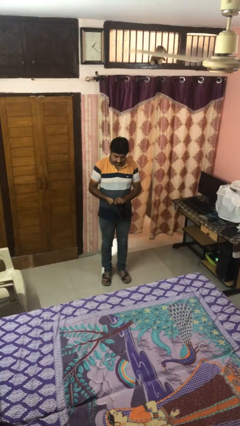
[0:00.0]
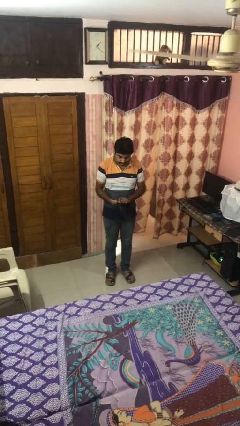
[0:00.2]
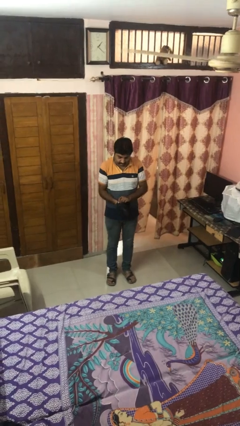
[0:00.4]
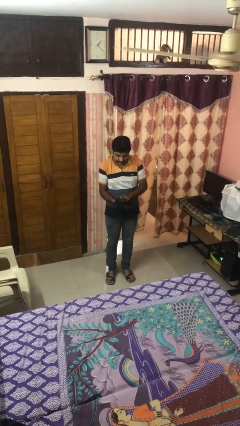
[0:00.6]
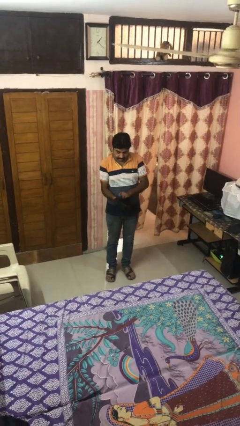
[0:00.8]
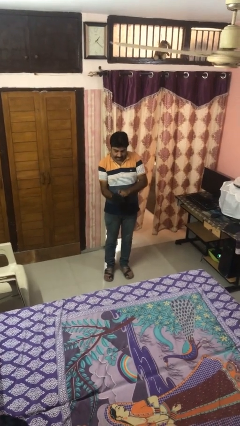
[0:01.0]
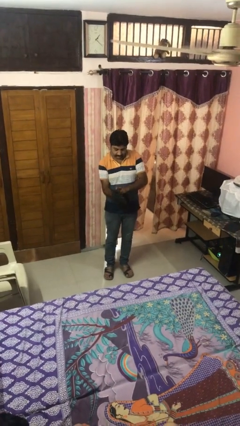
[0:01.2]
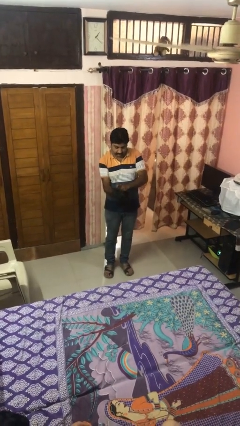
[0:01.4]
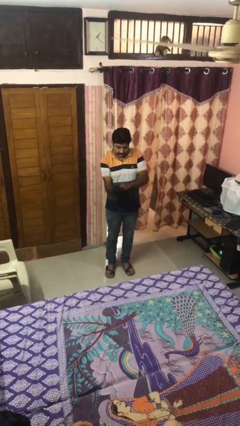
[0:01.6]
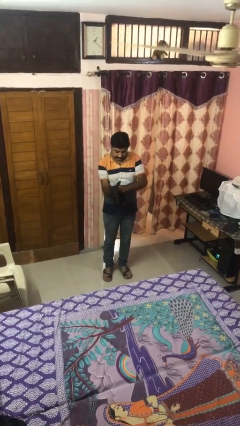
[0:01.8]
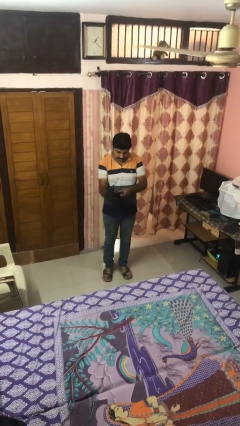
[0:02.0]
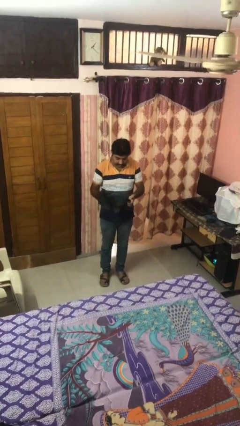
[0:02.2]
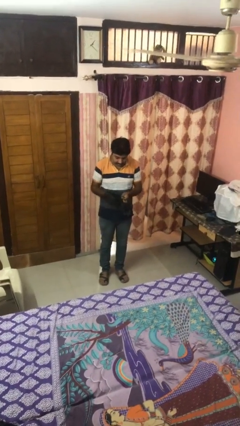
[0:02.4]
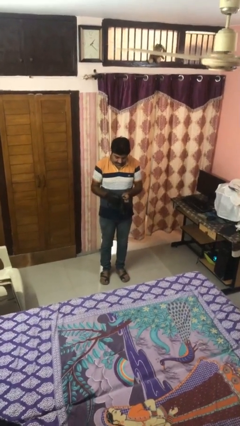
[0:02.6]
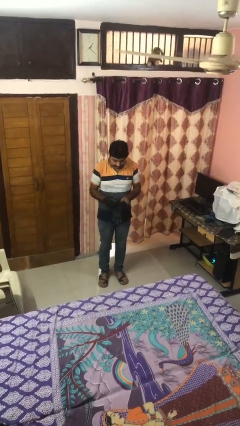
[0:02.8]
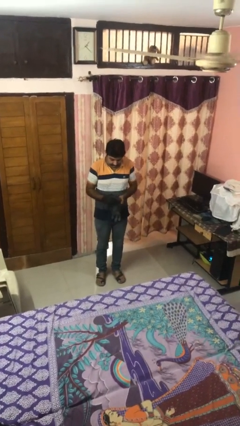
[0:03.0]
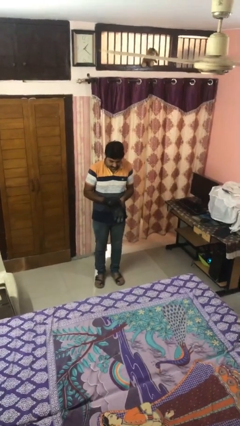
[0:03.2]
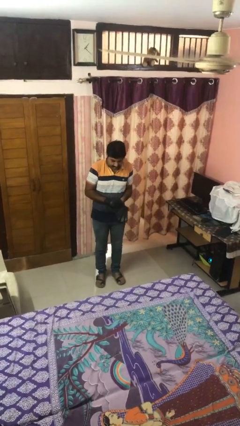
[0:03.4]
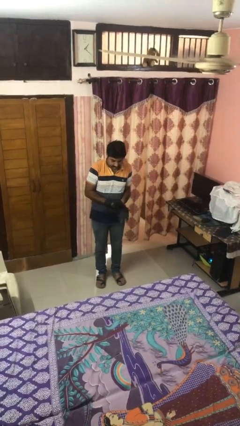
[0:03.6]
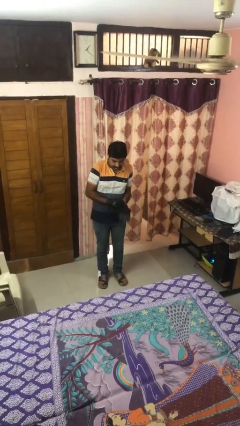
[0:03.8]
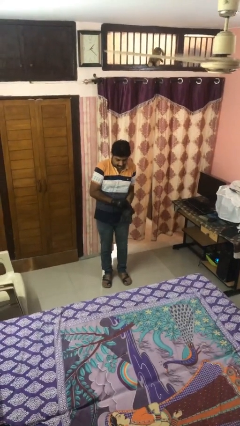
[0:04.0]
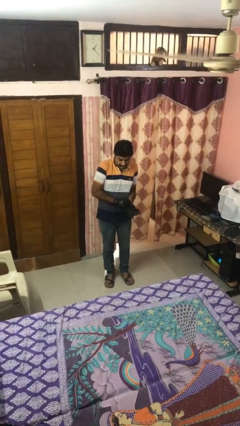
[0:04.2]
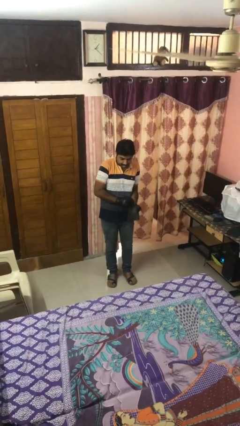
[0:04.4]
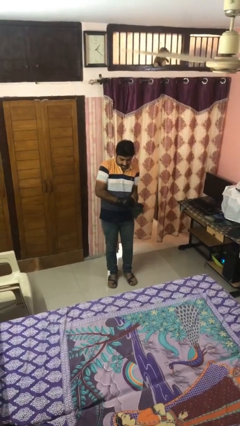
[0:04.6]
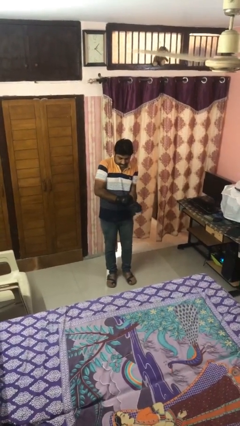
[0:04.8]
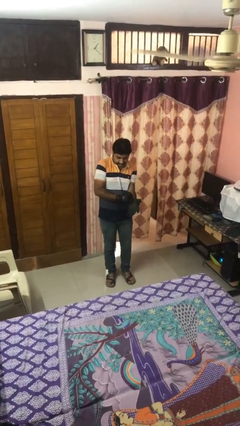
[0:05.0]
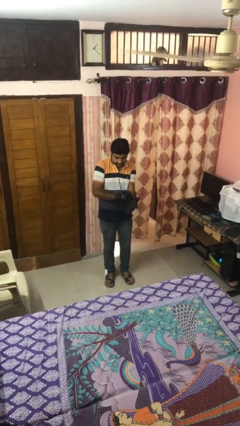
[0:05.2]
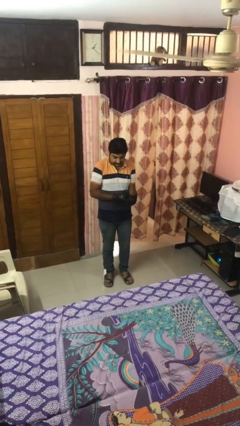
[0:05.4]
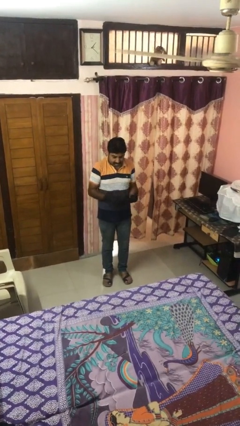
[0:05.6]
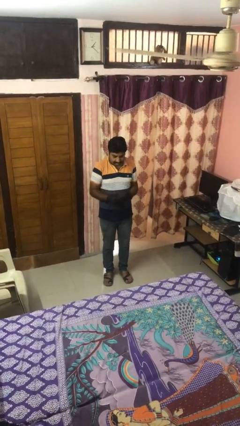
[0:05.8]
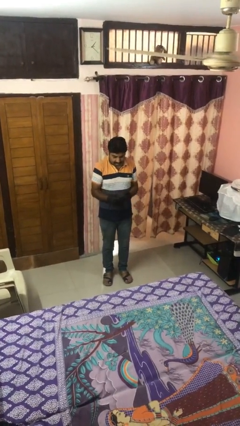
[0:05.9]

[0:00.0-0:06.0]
person puts on gloves

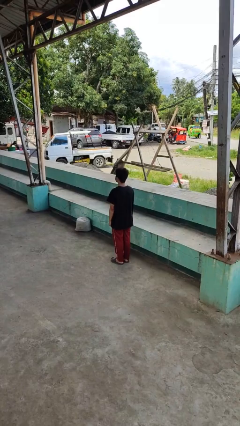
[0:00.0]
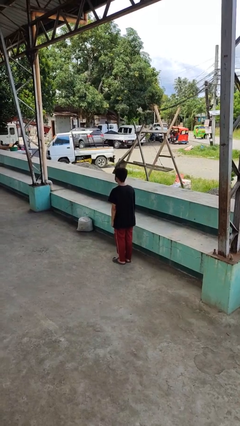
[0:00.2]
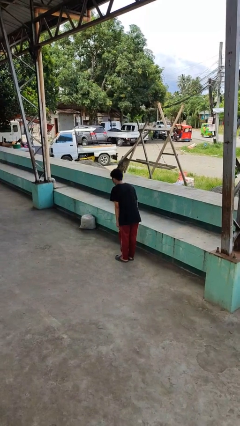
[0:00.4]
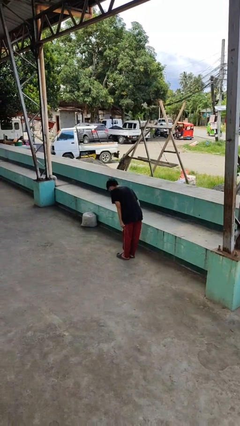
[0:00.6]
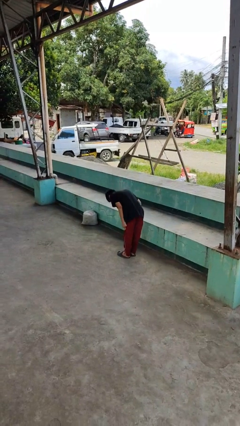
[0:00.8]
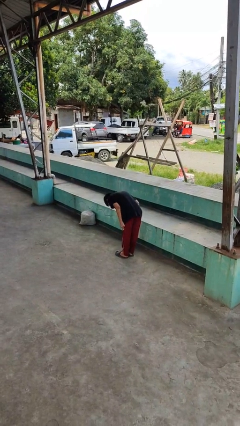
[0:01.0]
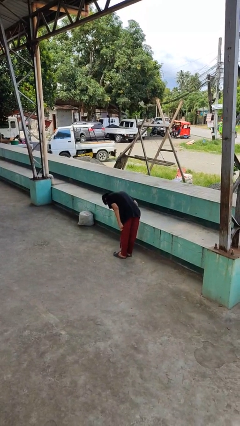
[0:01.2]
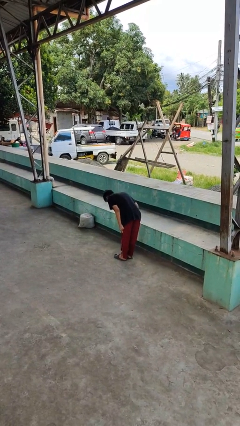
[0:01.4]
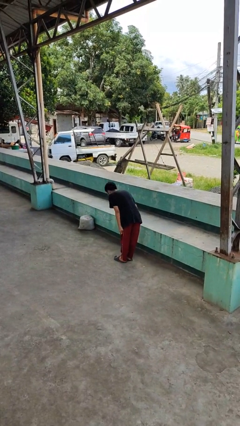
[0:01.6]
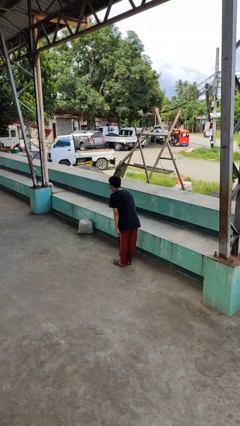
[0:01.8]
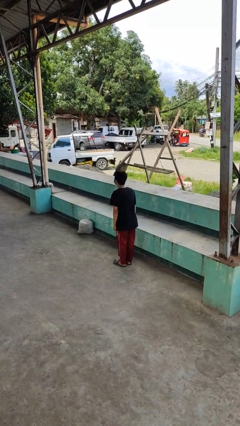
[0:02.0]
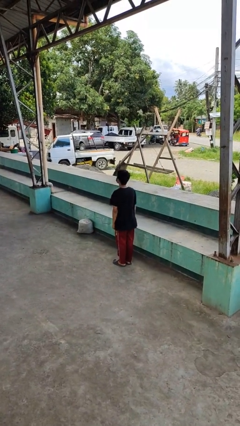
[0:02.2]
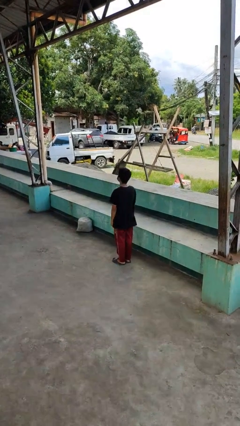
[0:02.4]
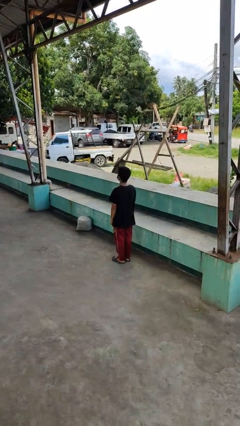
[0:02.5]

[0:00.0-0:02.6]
person bows

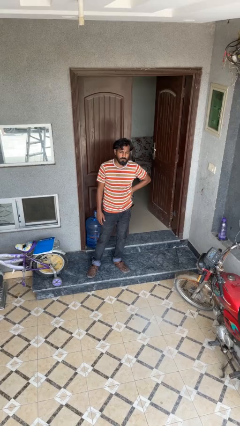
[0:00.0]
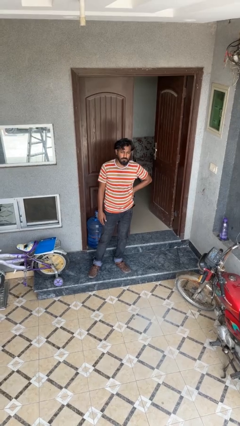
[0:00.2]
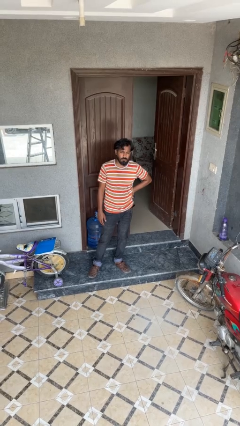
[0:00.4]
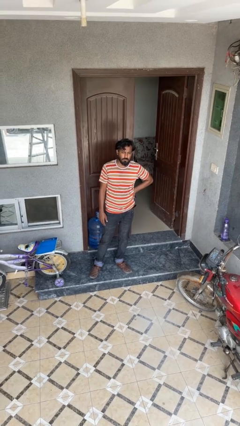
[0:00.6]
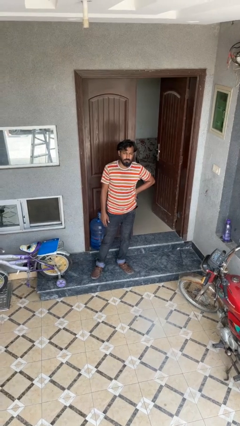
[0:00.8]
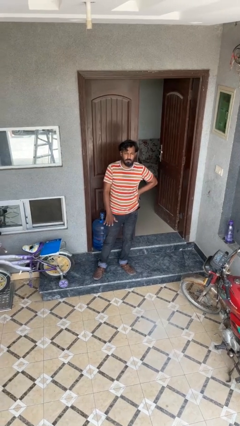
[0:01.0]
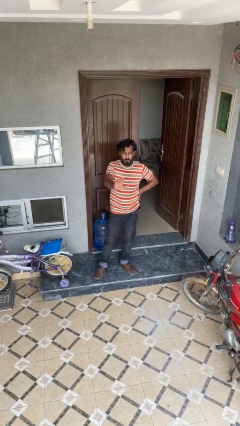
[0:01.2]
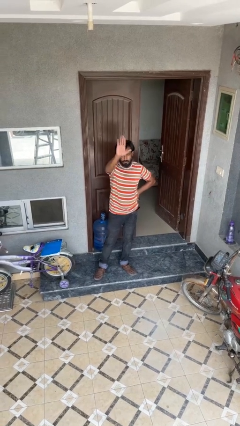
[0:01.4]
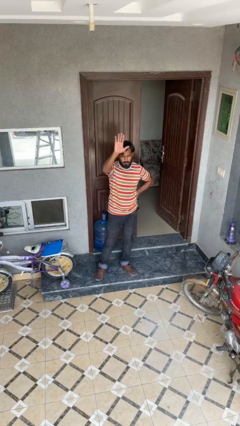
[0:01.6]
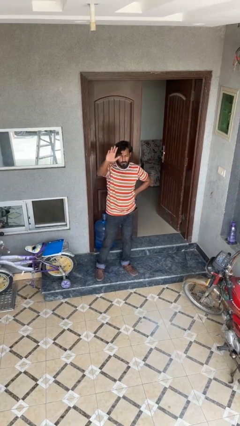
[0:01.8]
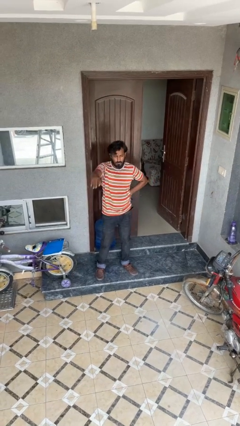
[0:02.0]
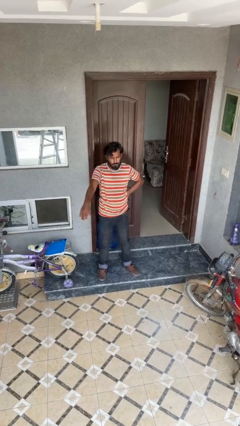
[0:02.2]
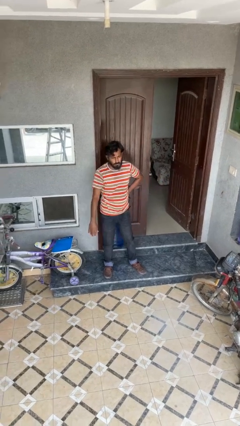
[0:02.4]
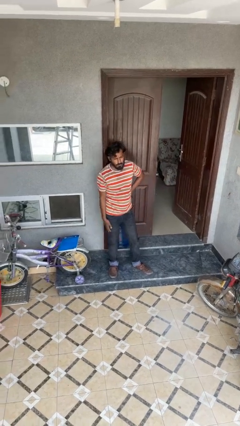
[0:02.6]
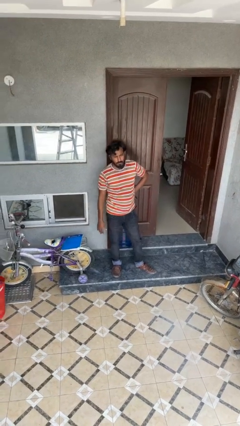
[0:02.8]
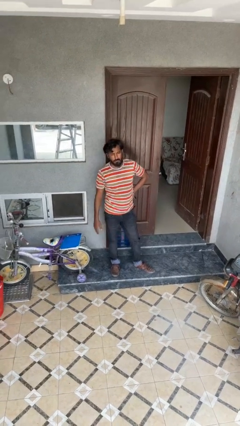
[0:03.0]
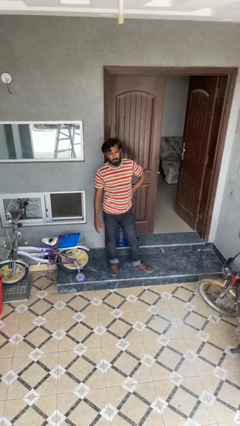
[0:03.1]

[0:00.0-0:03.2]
person gestures swipe up

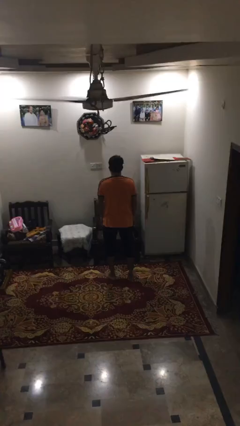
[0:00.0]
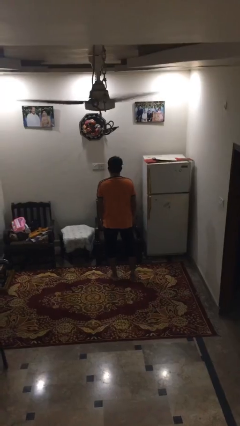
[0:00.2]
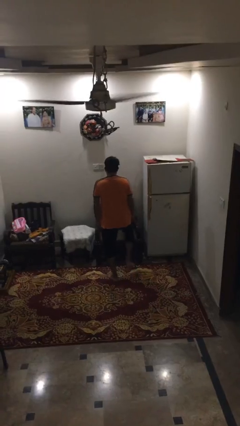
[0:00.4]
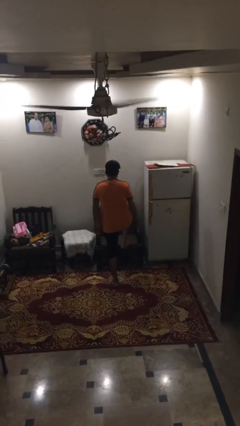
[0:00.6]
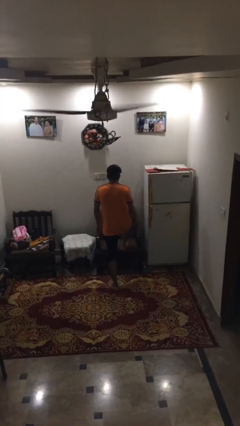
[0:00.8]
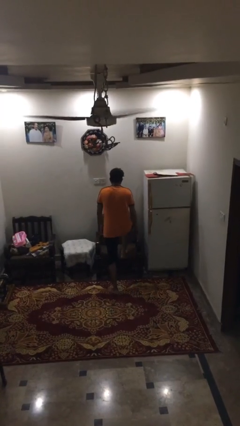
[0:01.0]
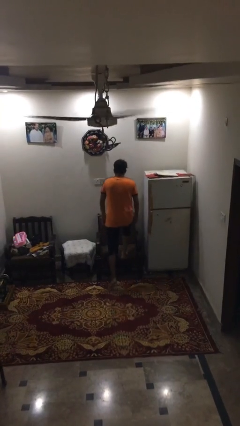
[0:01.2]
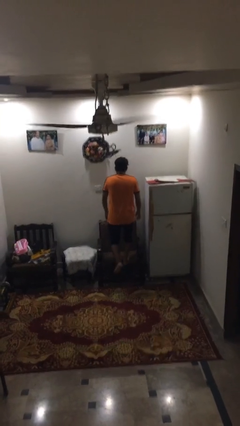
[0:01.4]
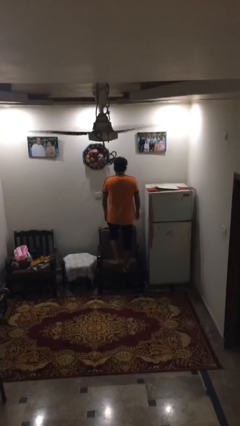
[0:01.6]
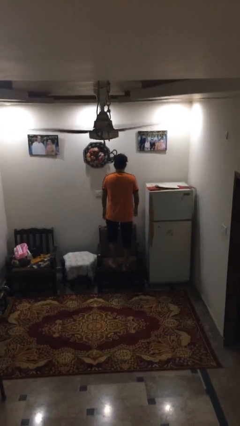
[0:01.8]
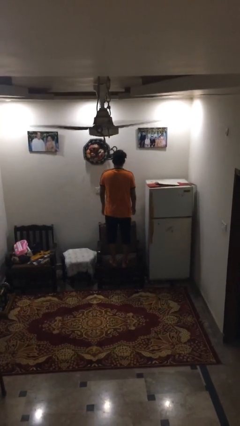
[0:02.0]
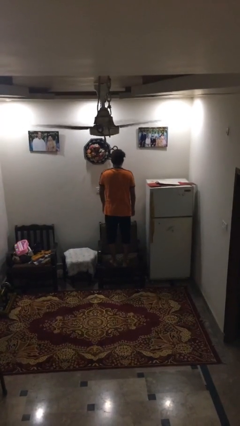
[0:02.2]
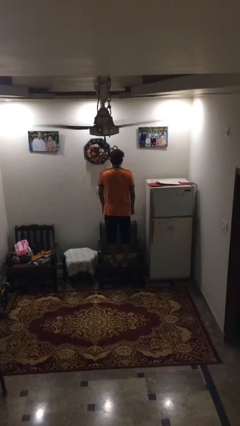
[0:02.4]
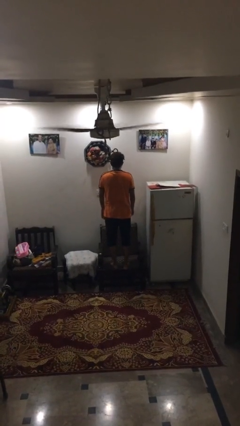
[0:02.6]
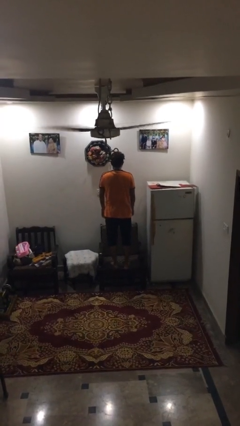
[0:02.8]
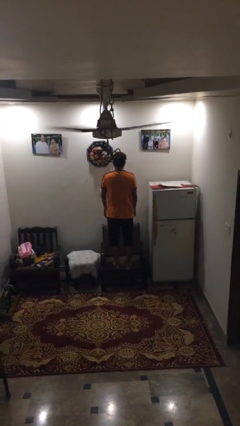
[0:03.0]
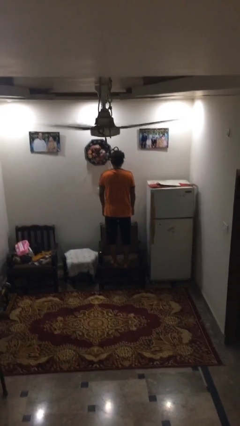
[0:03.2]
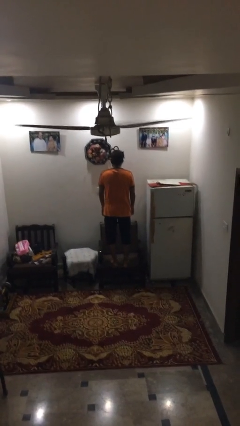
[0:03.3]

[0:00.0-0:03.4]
person climbs on couch

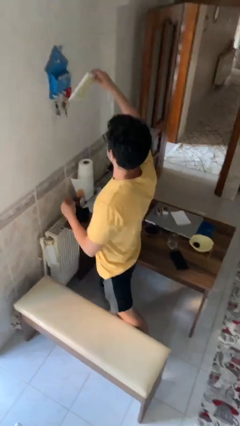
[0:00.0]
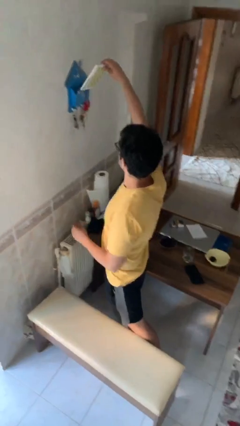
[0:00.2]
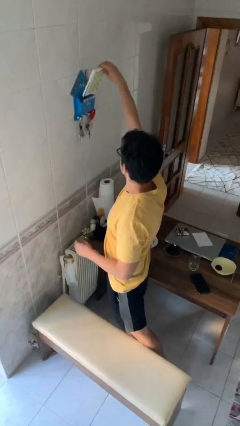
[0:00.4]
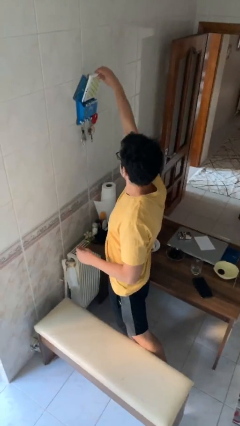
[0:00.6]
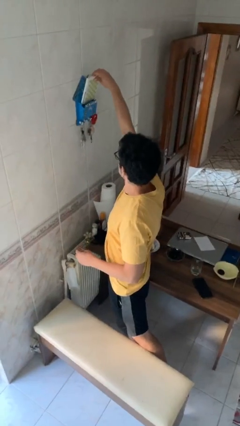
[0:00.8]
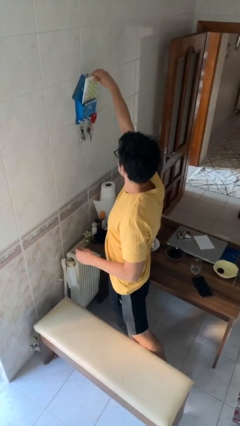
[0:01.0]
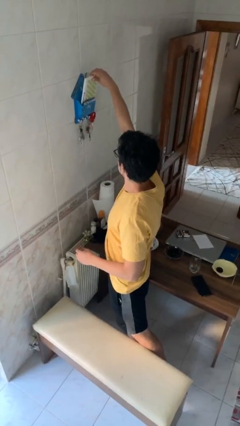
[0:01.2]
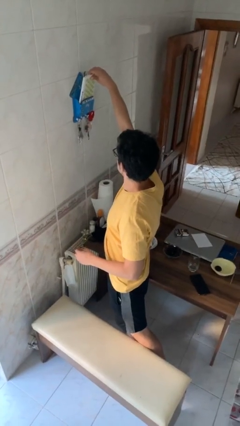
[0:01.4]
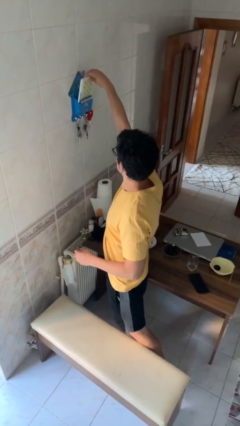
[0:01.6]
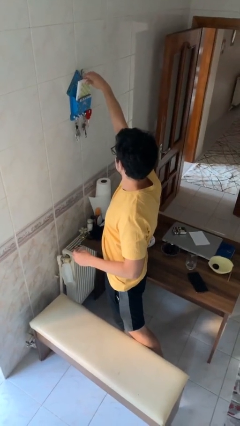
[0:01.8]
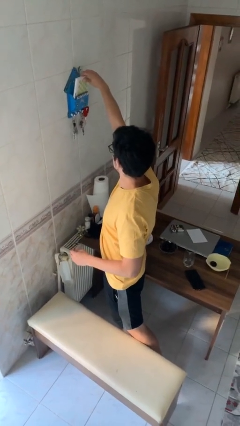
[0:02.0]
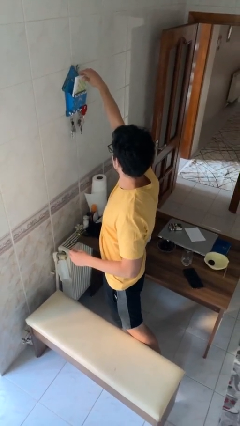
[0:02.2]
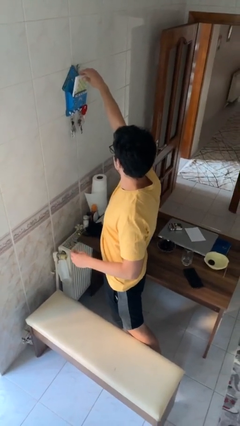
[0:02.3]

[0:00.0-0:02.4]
person puts down object on shelf

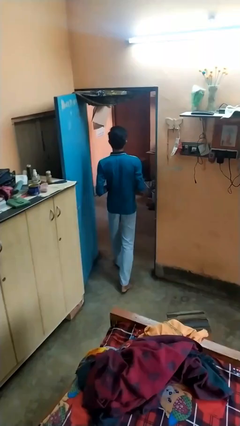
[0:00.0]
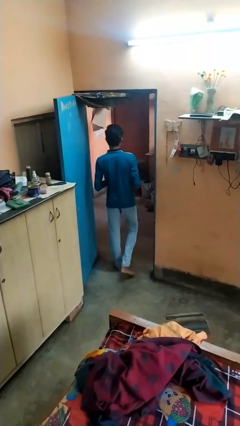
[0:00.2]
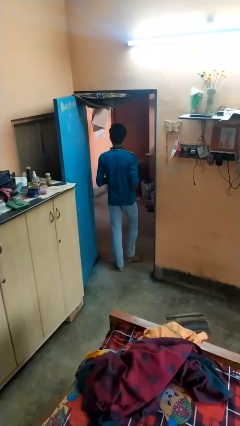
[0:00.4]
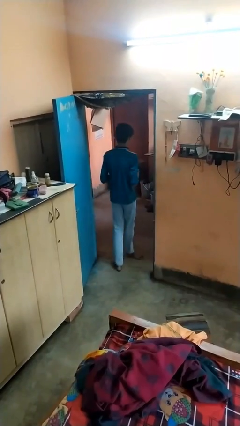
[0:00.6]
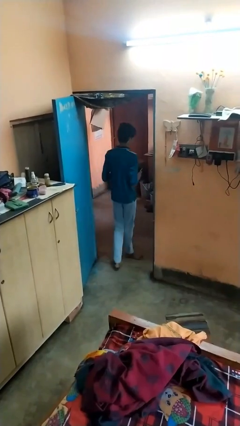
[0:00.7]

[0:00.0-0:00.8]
person exits scene through structure
